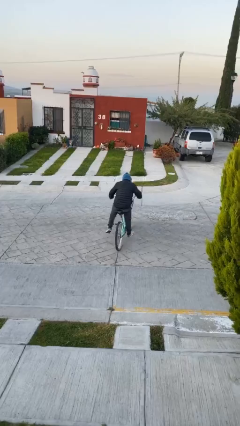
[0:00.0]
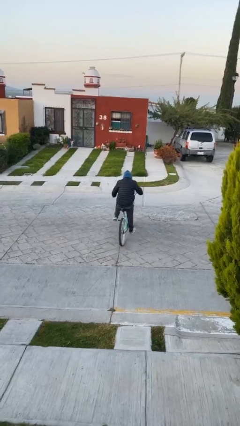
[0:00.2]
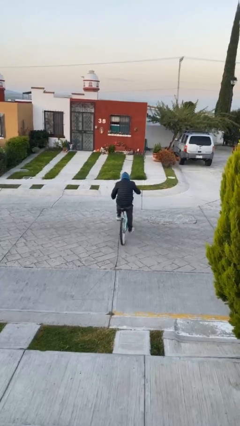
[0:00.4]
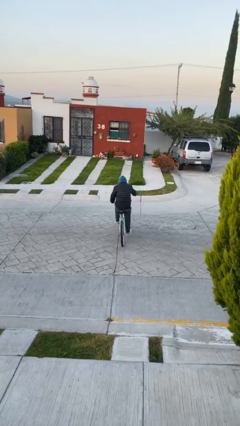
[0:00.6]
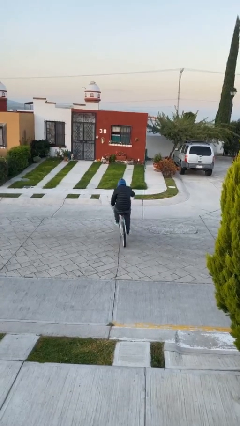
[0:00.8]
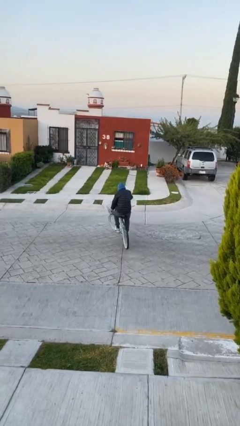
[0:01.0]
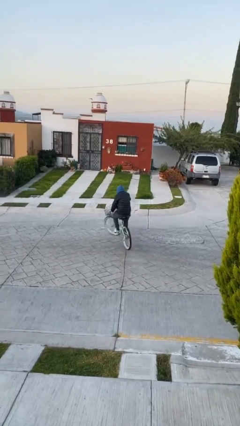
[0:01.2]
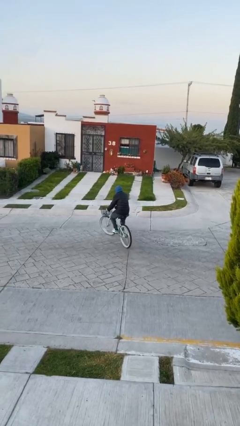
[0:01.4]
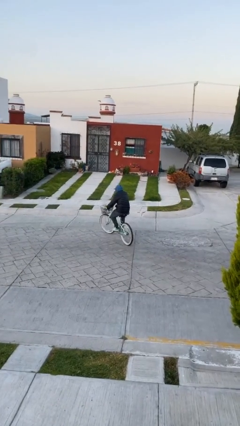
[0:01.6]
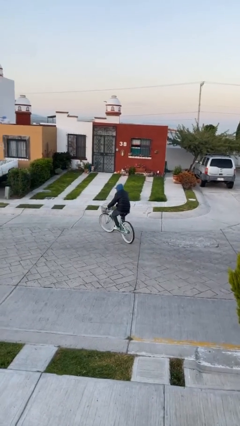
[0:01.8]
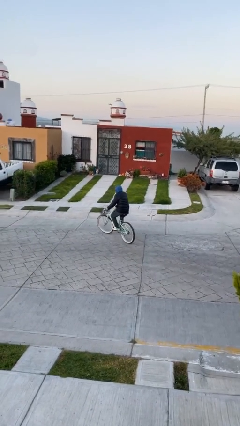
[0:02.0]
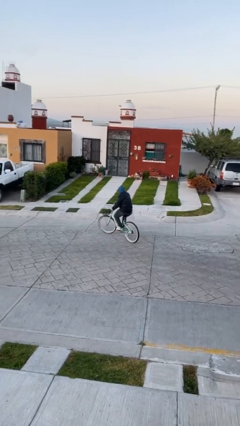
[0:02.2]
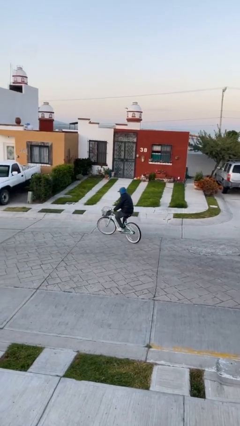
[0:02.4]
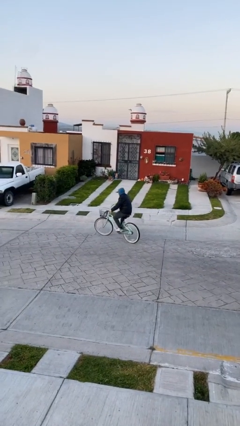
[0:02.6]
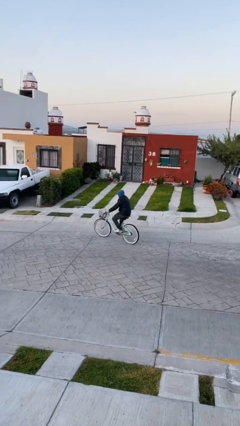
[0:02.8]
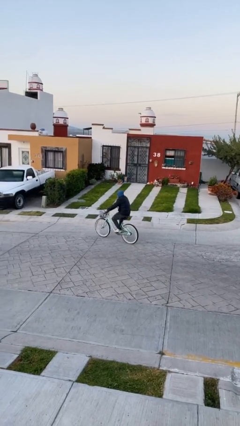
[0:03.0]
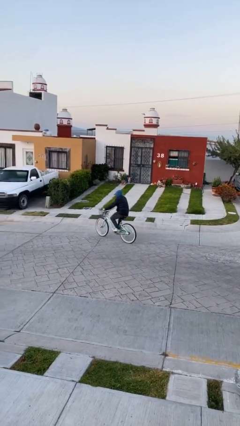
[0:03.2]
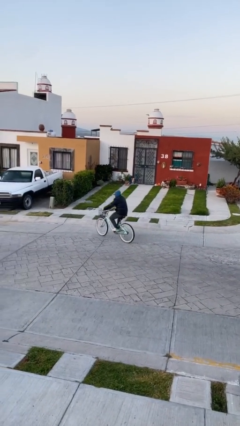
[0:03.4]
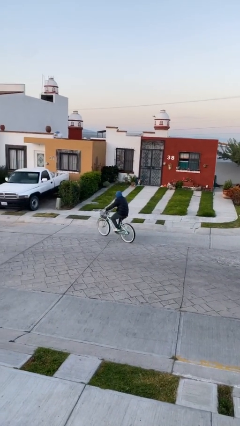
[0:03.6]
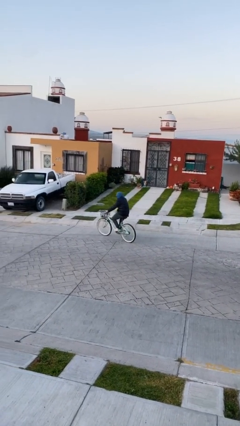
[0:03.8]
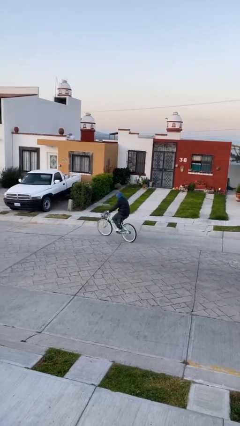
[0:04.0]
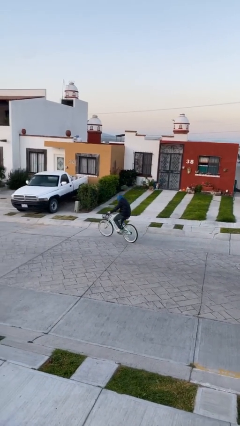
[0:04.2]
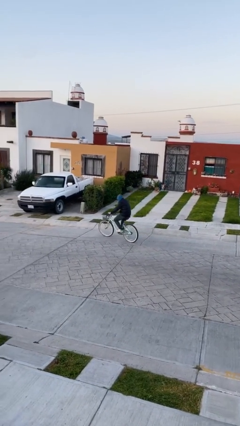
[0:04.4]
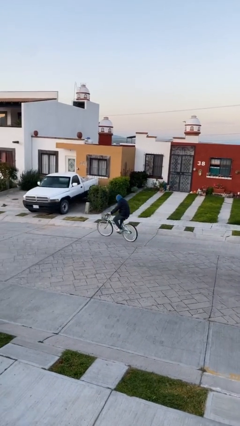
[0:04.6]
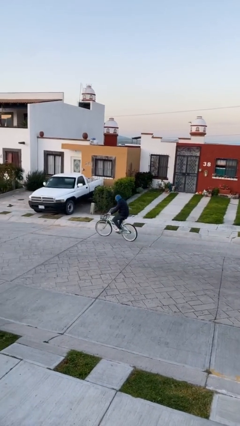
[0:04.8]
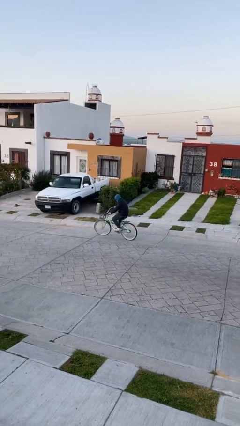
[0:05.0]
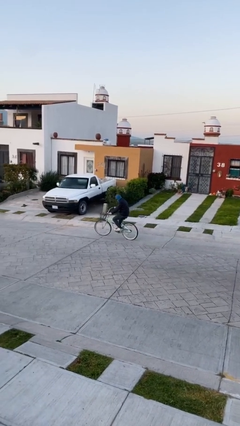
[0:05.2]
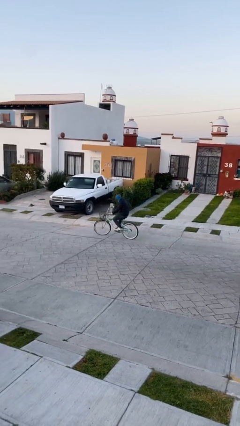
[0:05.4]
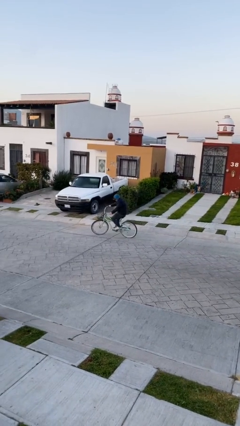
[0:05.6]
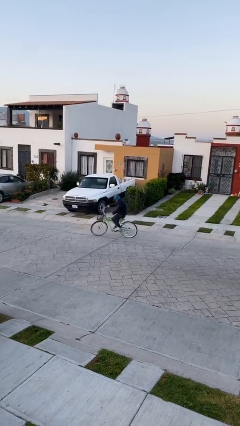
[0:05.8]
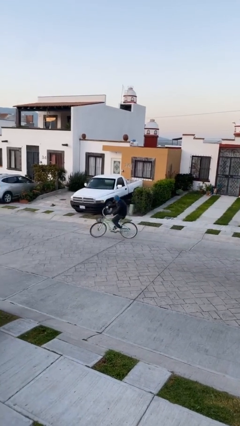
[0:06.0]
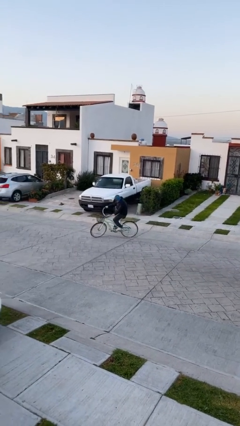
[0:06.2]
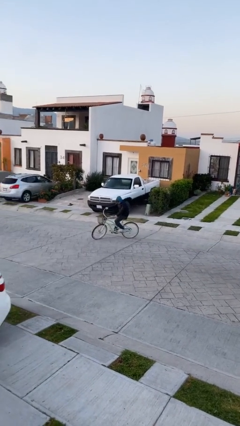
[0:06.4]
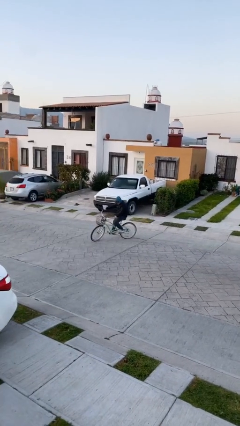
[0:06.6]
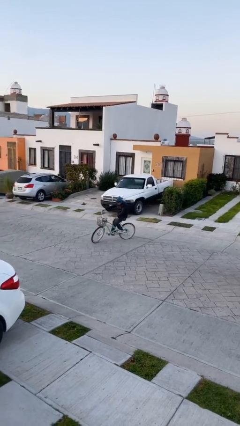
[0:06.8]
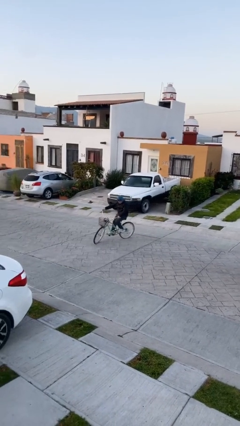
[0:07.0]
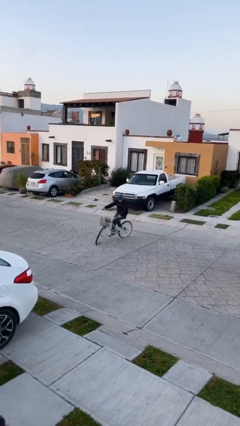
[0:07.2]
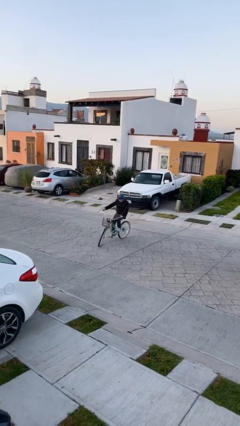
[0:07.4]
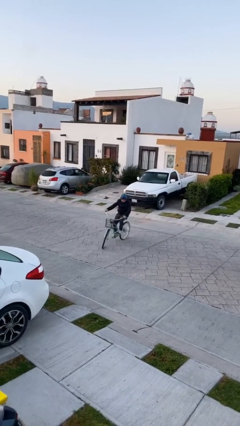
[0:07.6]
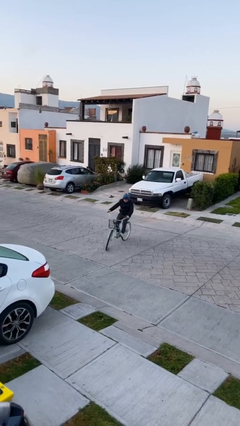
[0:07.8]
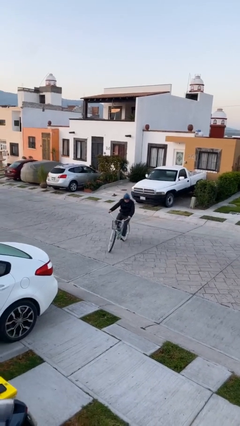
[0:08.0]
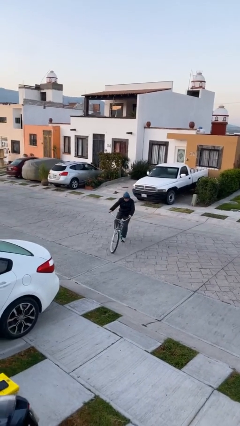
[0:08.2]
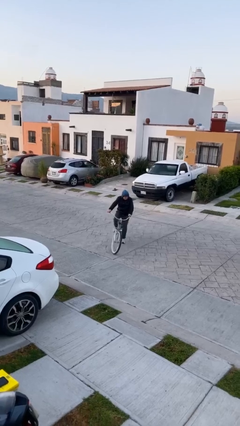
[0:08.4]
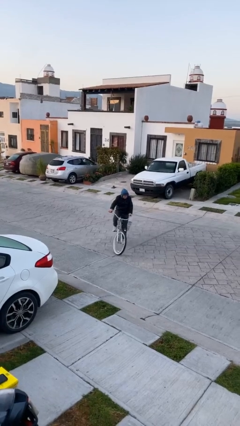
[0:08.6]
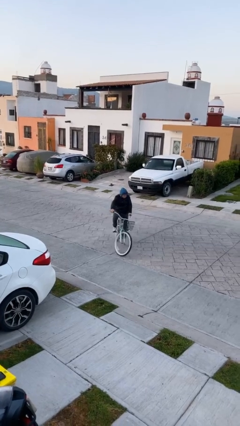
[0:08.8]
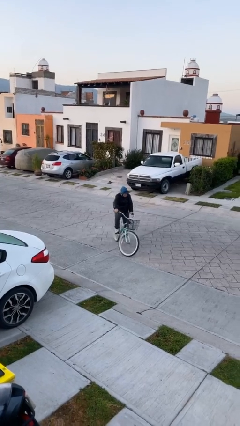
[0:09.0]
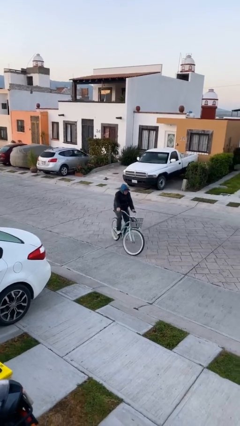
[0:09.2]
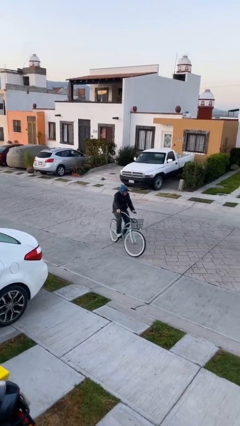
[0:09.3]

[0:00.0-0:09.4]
person rides bicycle

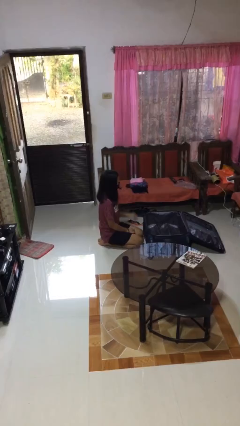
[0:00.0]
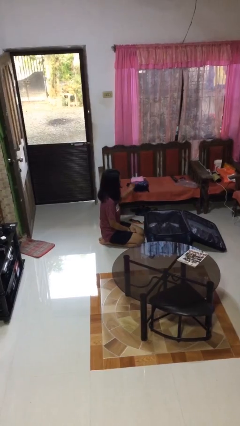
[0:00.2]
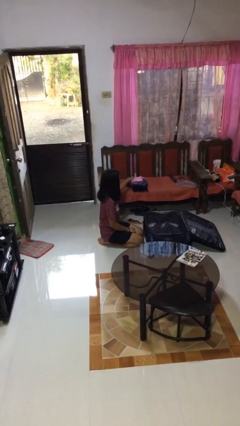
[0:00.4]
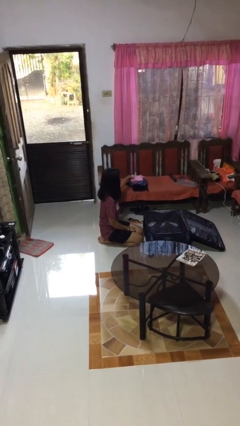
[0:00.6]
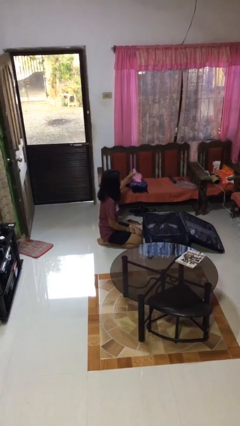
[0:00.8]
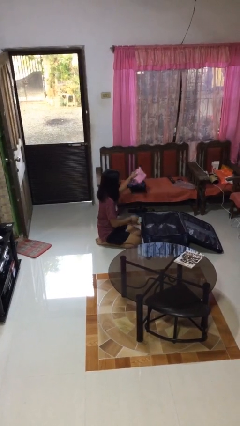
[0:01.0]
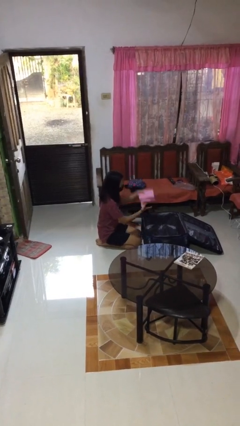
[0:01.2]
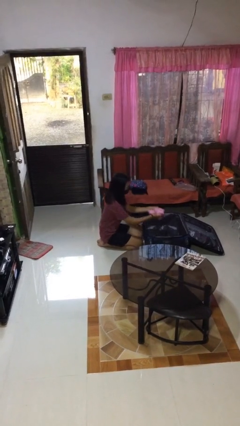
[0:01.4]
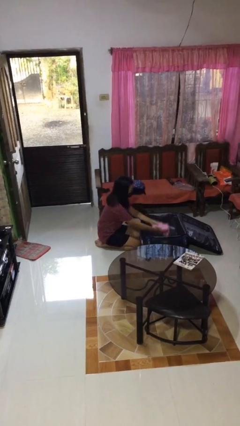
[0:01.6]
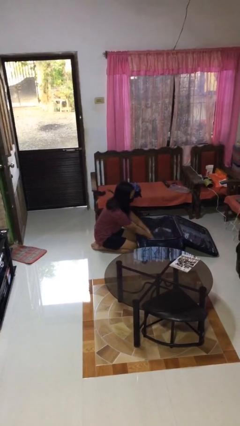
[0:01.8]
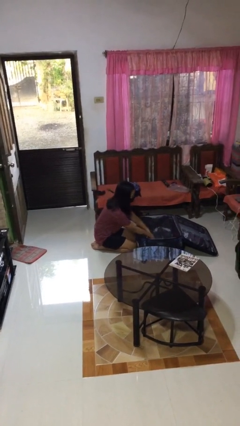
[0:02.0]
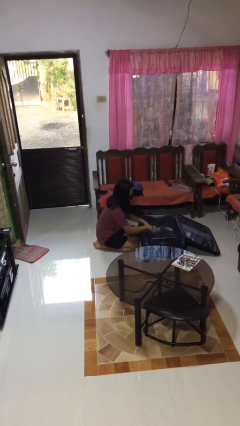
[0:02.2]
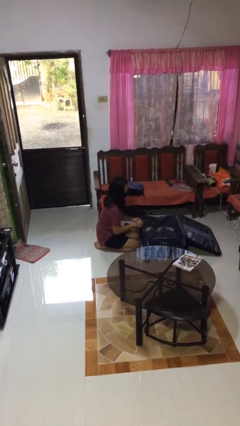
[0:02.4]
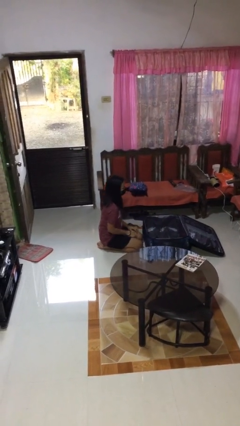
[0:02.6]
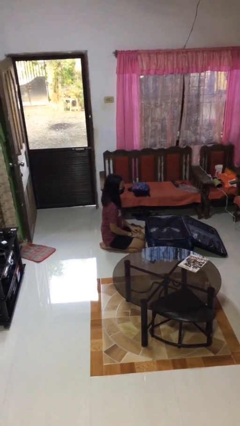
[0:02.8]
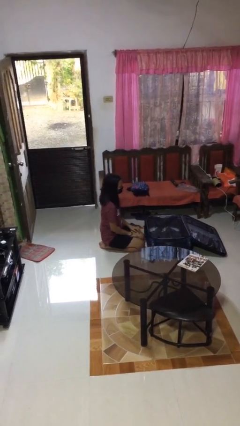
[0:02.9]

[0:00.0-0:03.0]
person loads clothes into suitcase

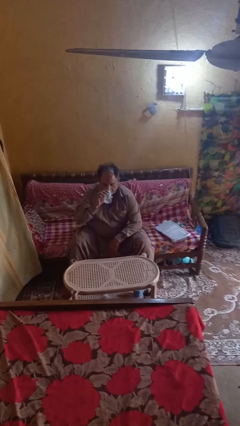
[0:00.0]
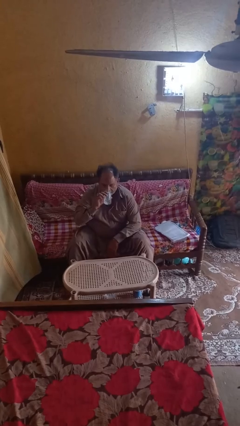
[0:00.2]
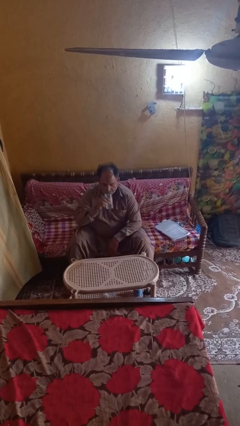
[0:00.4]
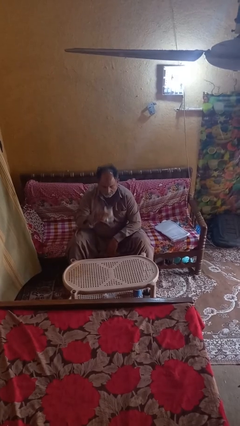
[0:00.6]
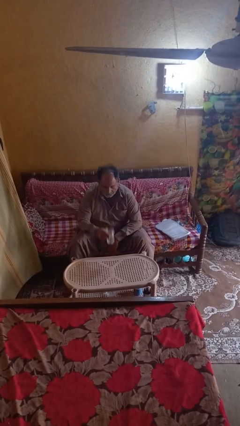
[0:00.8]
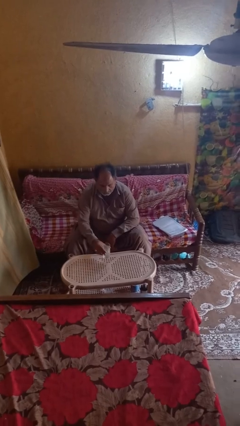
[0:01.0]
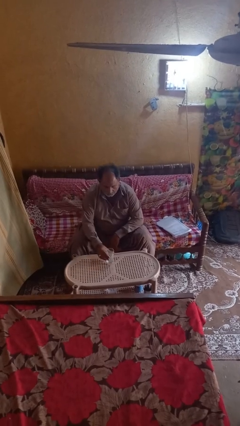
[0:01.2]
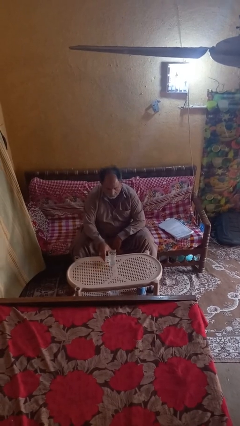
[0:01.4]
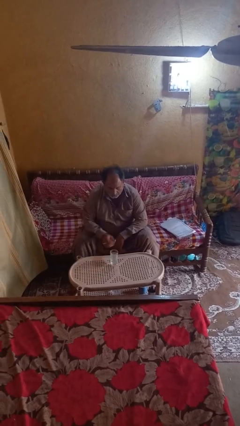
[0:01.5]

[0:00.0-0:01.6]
person puts down object on table

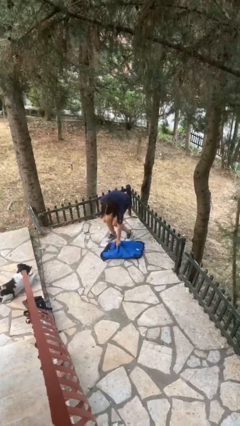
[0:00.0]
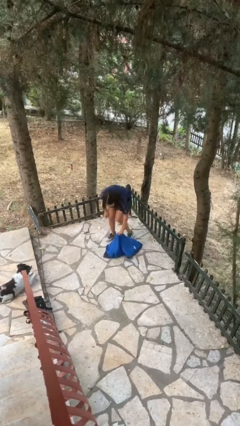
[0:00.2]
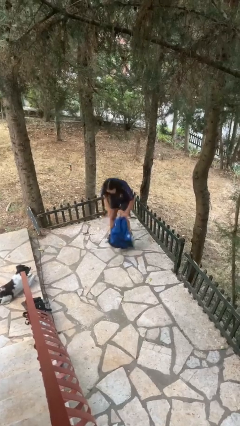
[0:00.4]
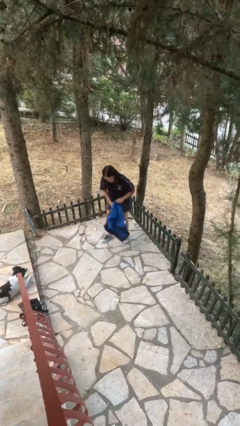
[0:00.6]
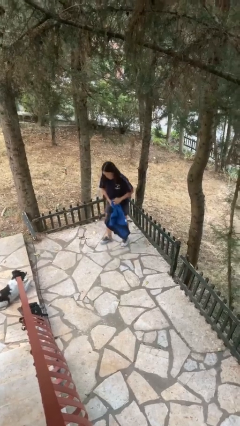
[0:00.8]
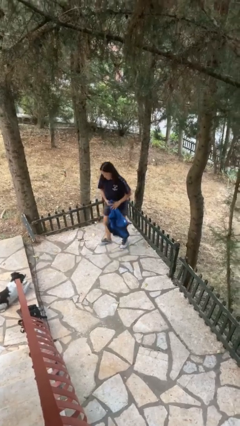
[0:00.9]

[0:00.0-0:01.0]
person picks up object from floor

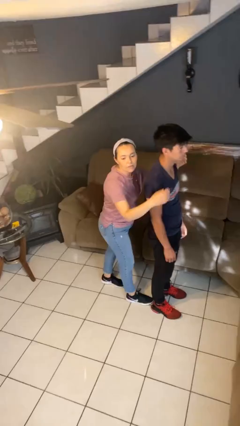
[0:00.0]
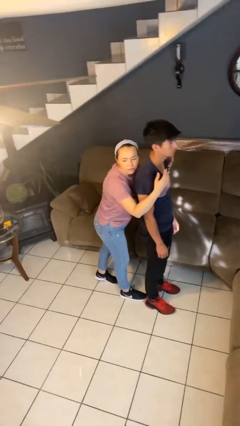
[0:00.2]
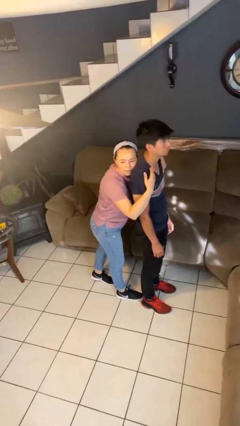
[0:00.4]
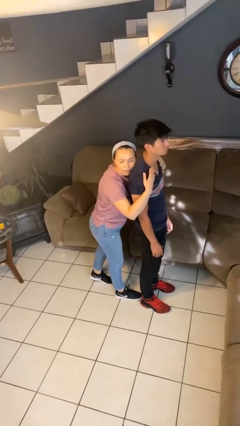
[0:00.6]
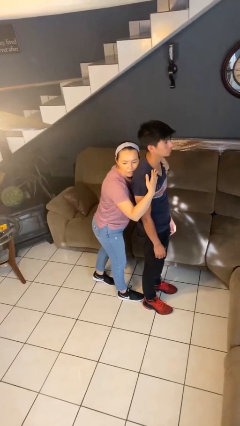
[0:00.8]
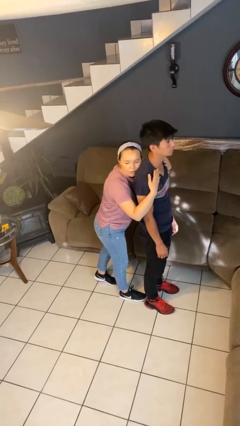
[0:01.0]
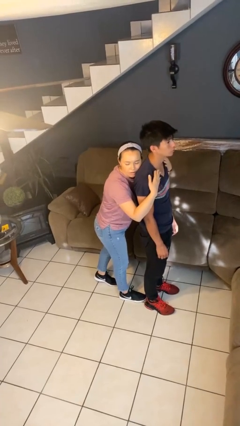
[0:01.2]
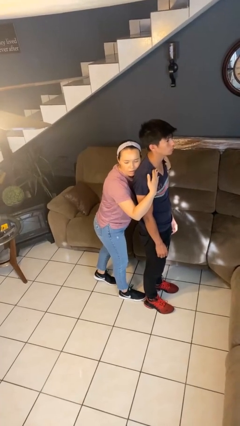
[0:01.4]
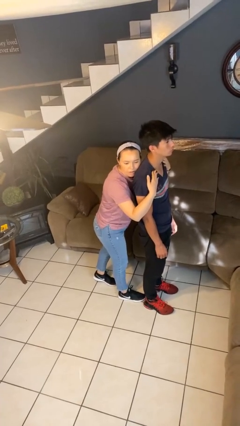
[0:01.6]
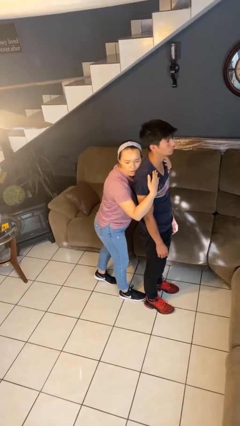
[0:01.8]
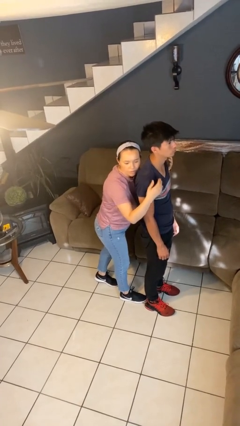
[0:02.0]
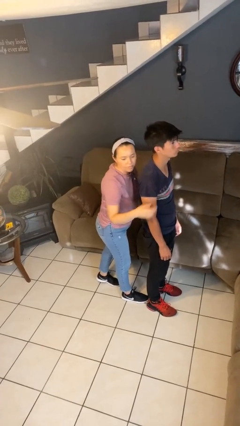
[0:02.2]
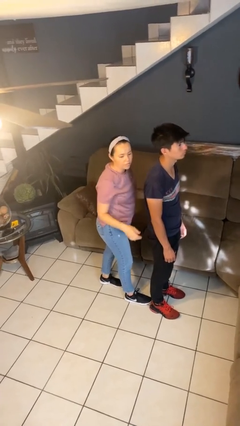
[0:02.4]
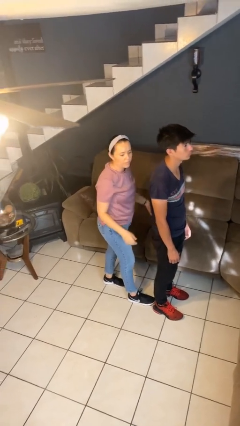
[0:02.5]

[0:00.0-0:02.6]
person hugs person from behind
